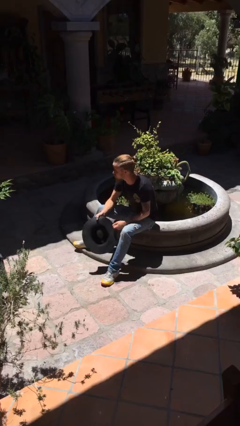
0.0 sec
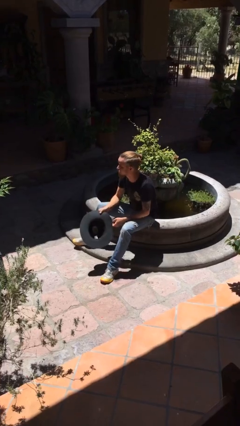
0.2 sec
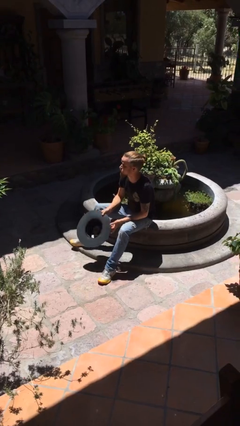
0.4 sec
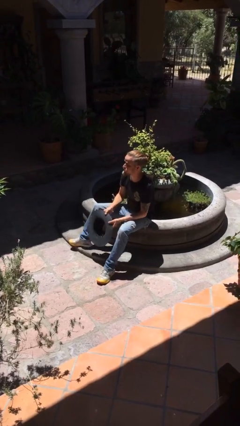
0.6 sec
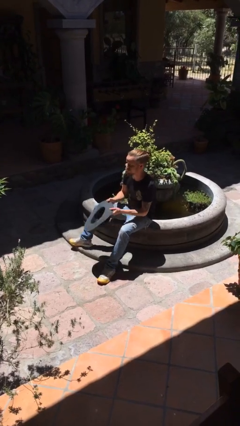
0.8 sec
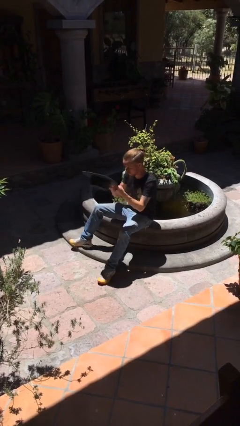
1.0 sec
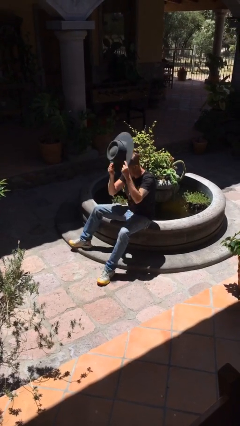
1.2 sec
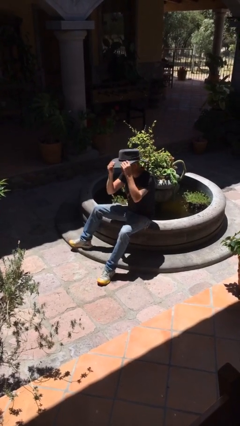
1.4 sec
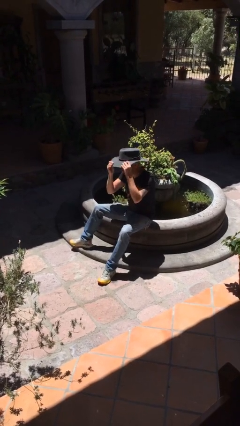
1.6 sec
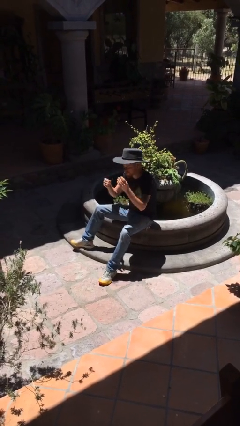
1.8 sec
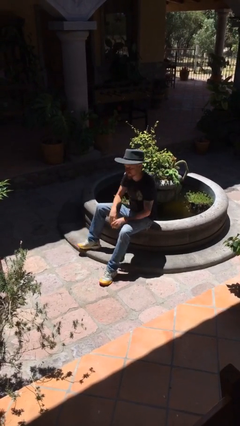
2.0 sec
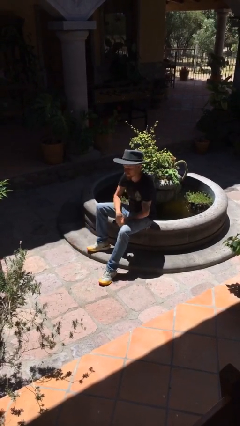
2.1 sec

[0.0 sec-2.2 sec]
person puts on hat

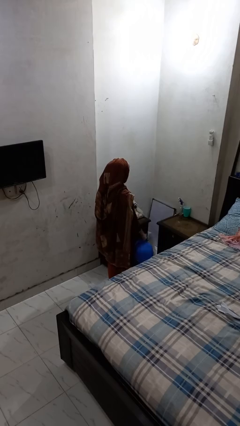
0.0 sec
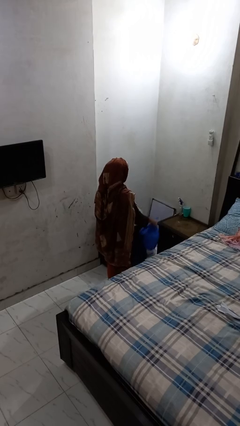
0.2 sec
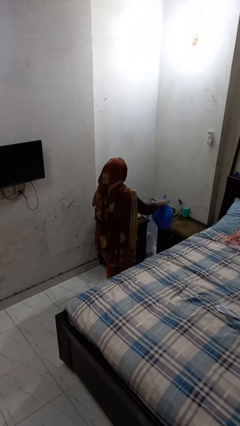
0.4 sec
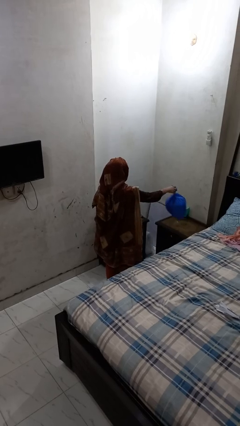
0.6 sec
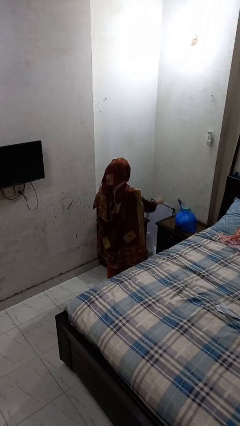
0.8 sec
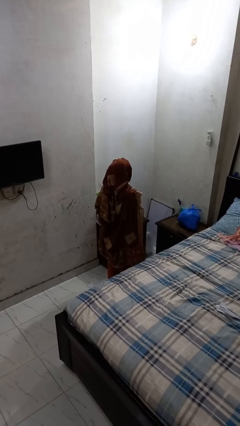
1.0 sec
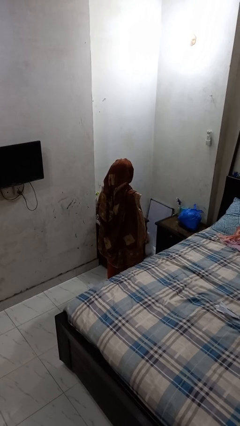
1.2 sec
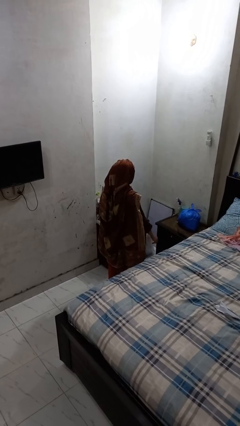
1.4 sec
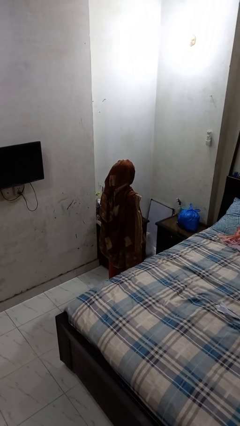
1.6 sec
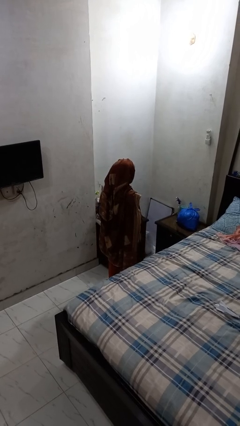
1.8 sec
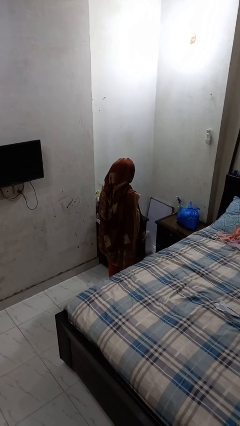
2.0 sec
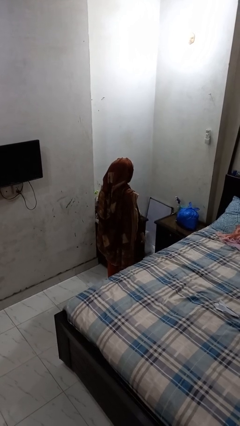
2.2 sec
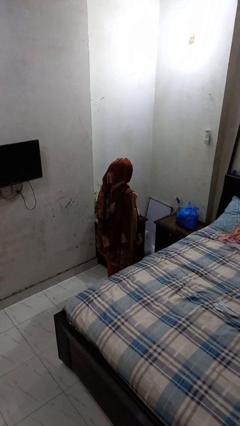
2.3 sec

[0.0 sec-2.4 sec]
person throws object on table

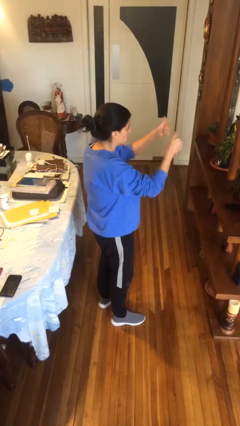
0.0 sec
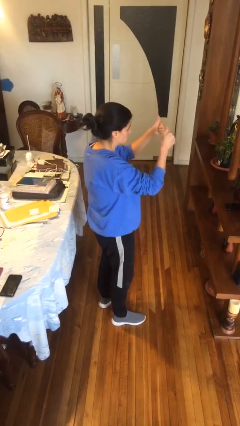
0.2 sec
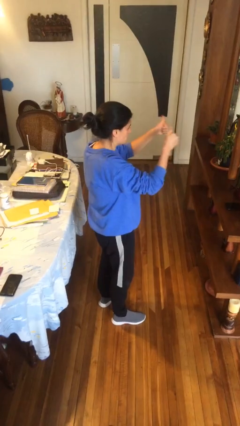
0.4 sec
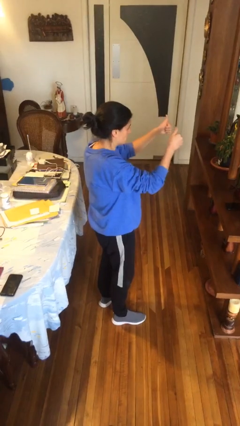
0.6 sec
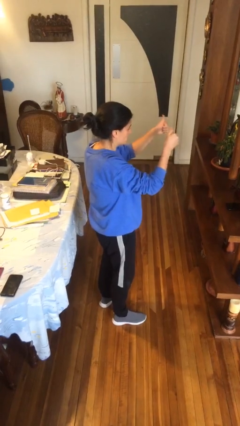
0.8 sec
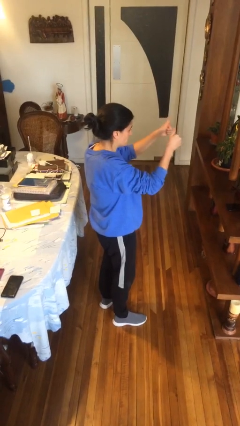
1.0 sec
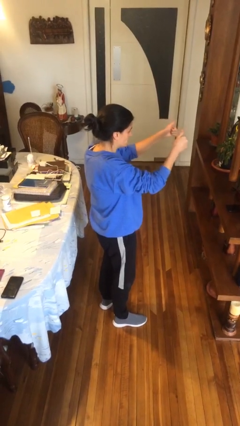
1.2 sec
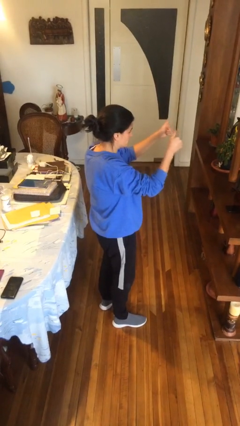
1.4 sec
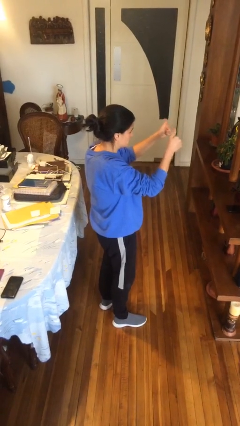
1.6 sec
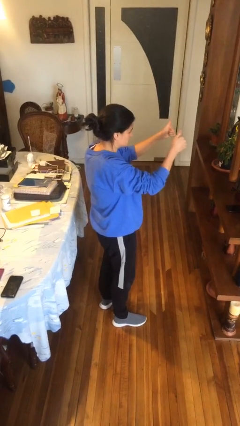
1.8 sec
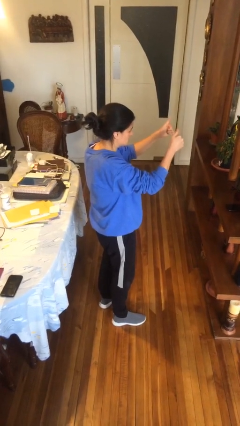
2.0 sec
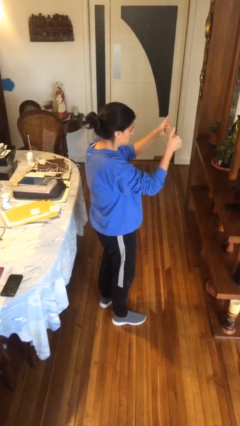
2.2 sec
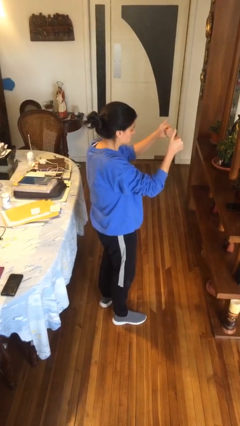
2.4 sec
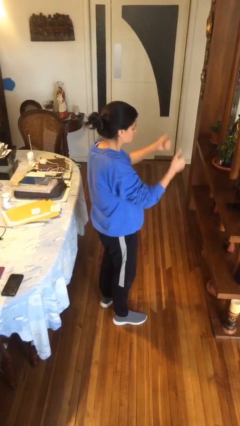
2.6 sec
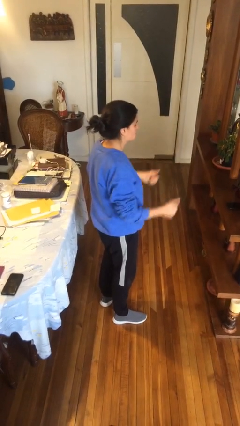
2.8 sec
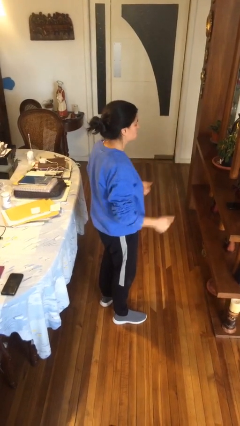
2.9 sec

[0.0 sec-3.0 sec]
person gestures thumbs up

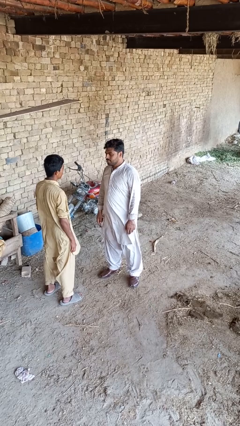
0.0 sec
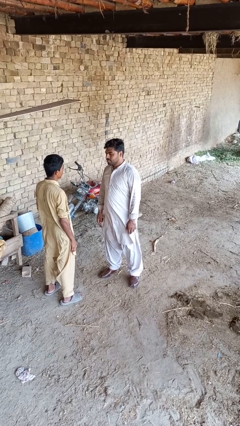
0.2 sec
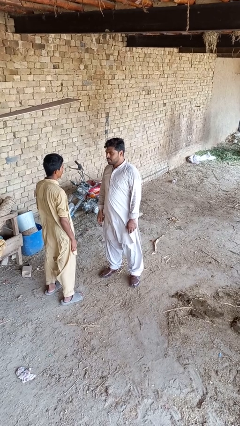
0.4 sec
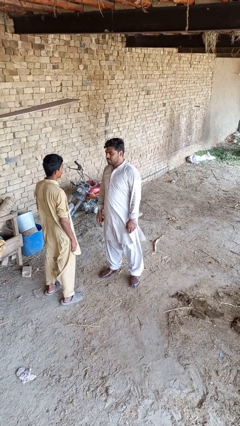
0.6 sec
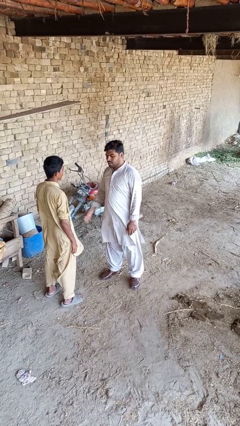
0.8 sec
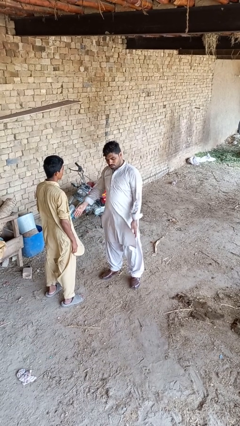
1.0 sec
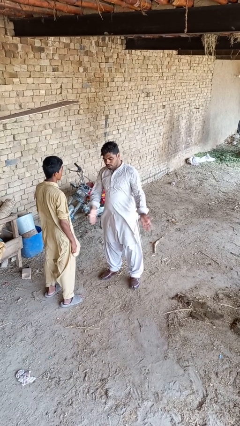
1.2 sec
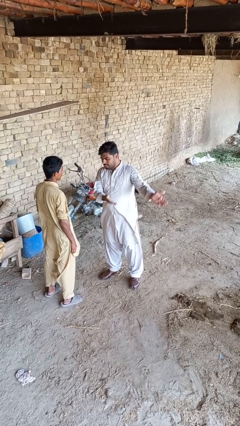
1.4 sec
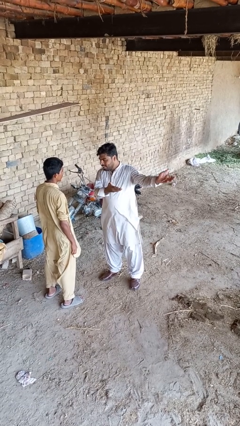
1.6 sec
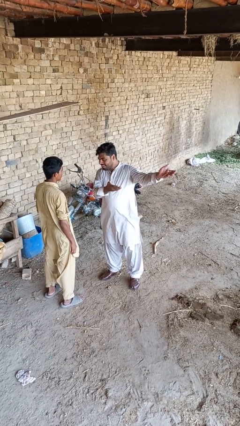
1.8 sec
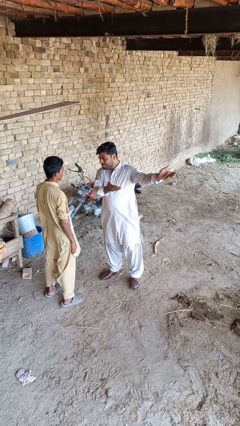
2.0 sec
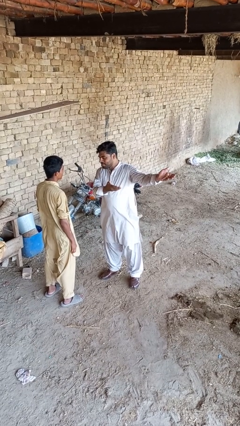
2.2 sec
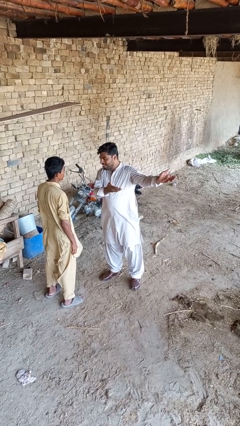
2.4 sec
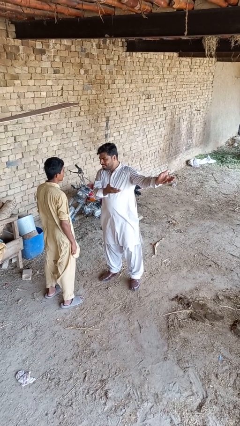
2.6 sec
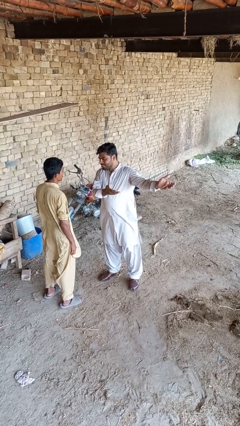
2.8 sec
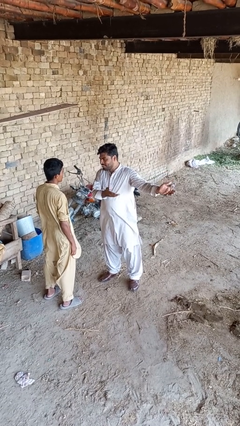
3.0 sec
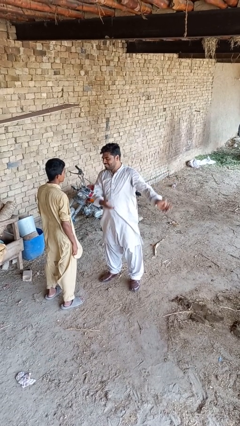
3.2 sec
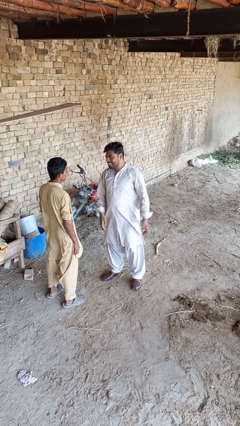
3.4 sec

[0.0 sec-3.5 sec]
person shoves person

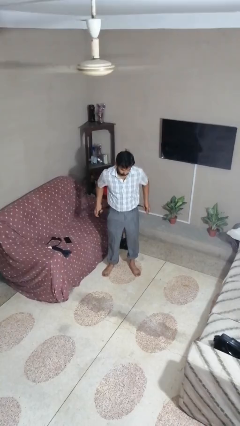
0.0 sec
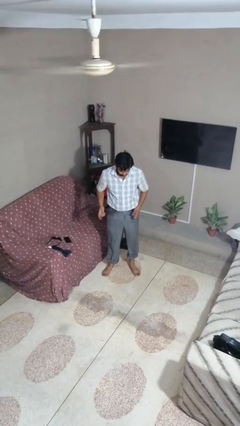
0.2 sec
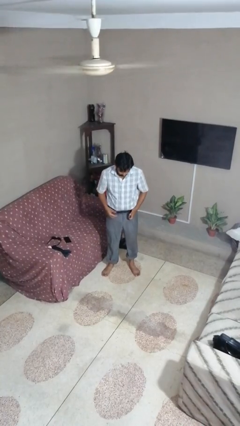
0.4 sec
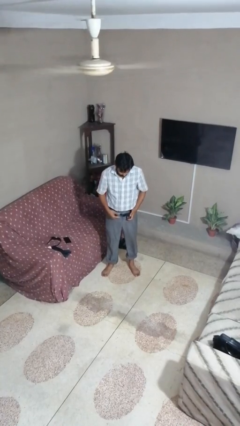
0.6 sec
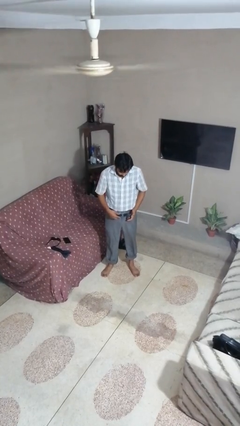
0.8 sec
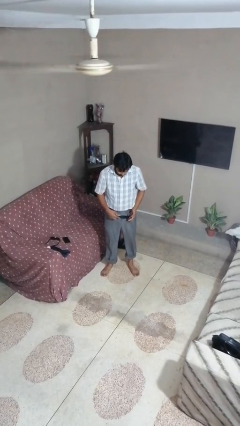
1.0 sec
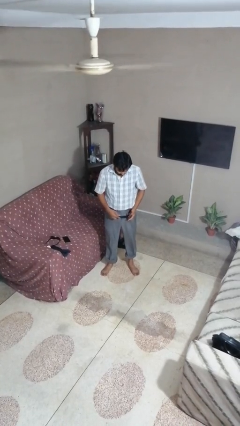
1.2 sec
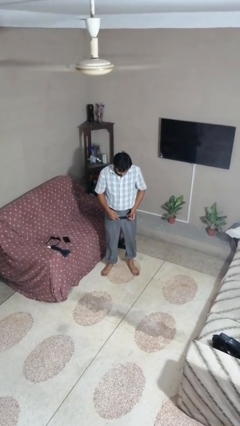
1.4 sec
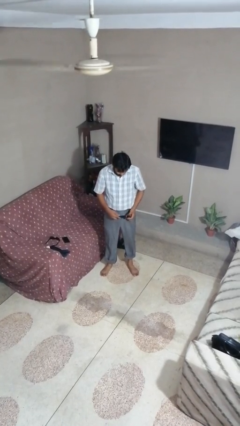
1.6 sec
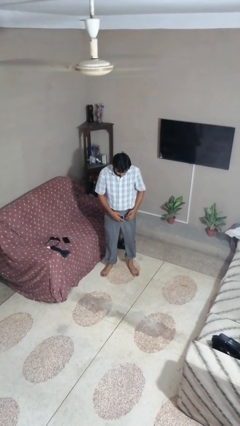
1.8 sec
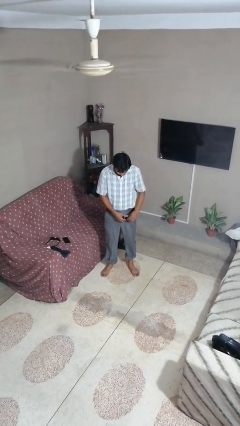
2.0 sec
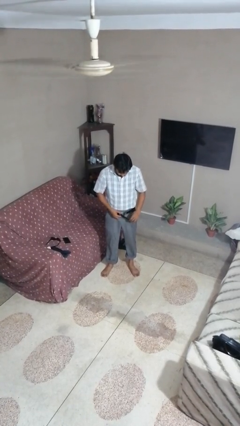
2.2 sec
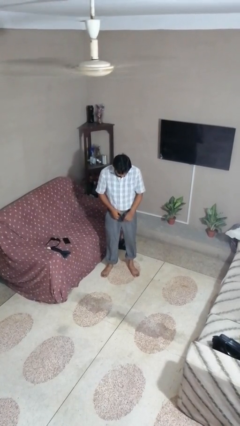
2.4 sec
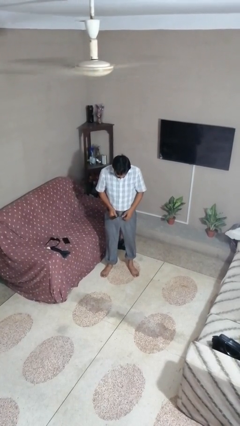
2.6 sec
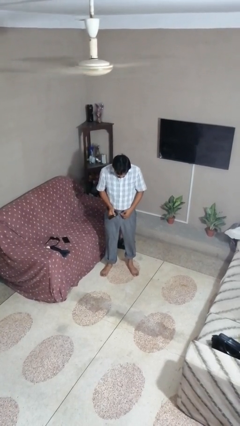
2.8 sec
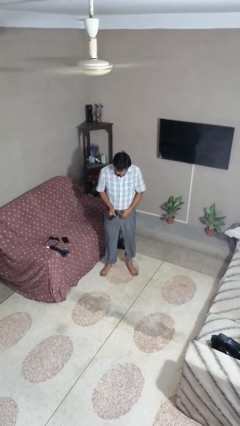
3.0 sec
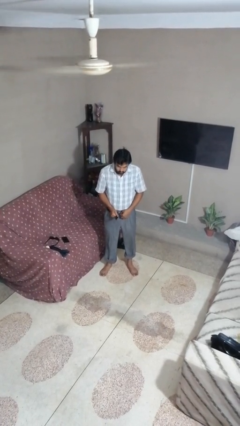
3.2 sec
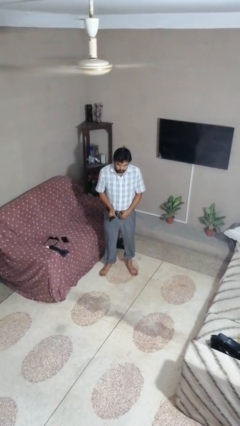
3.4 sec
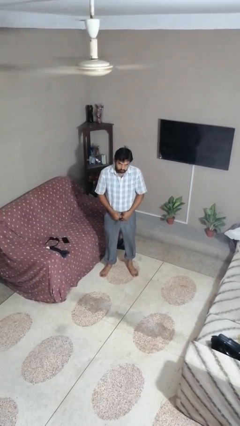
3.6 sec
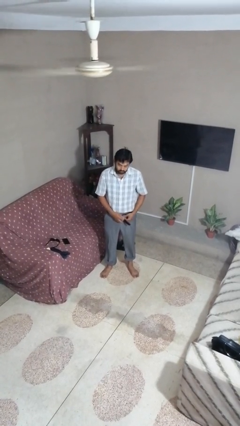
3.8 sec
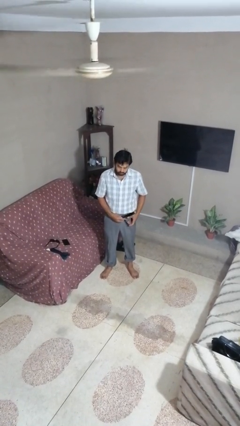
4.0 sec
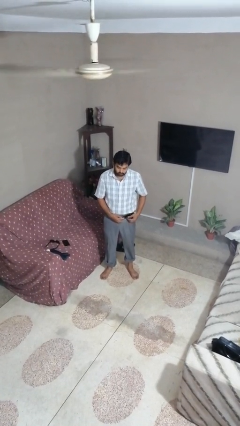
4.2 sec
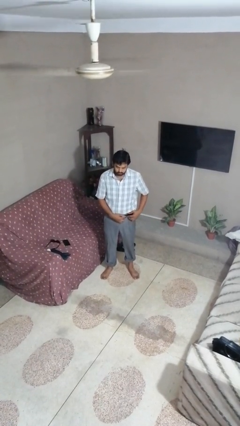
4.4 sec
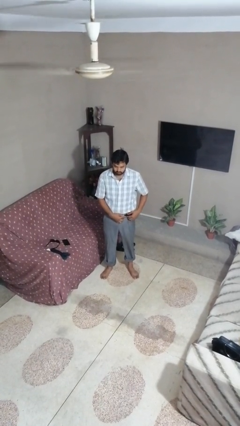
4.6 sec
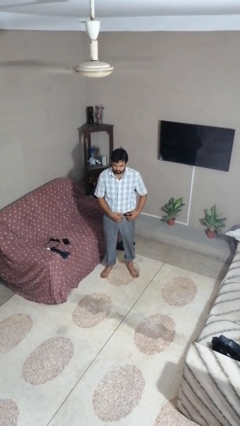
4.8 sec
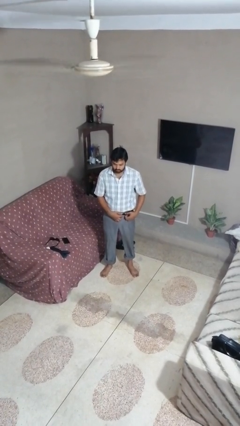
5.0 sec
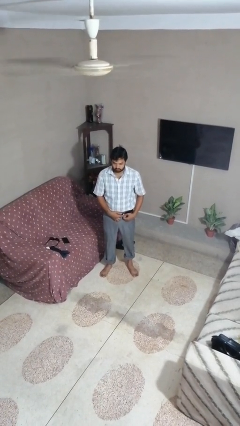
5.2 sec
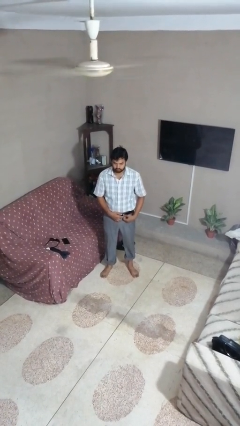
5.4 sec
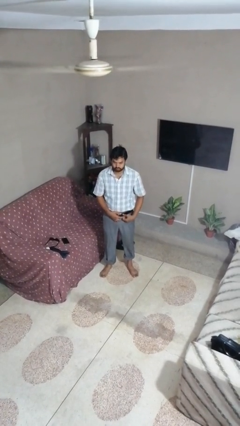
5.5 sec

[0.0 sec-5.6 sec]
person puts on belt

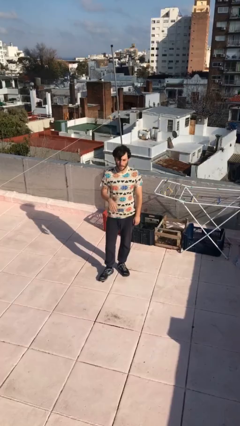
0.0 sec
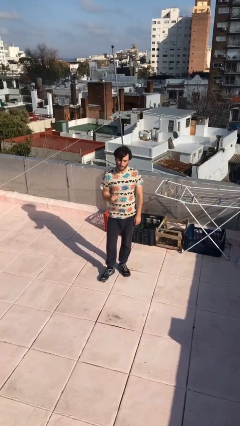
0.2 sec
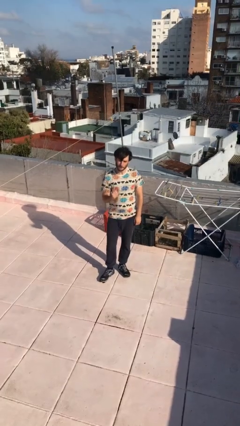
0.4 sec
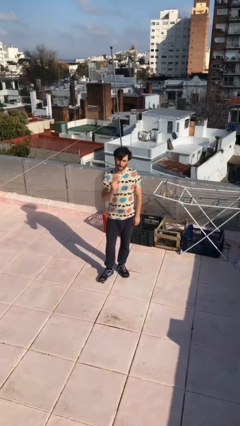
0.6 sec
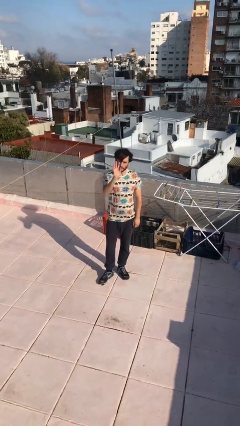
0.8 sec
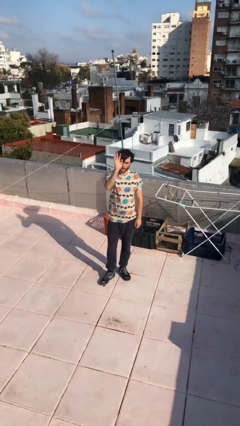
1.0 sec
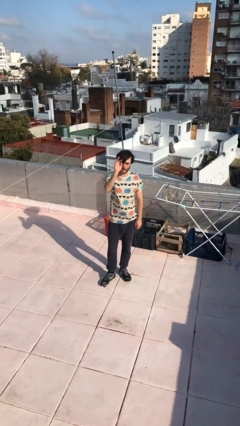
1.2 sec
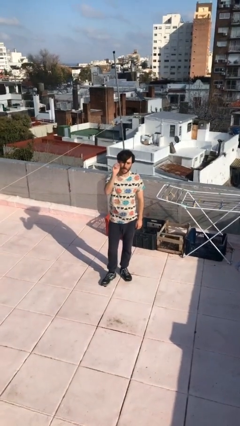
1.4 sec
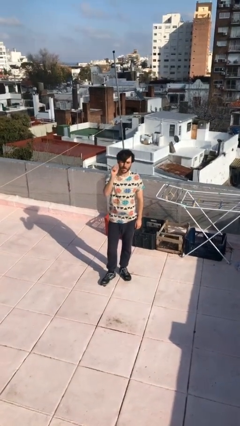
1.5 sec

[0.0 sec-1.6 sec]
person gestures swipe up
